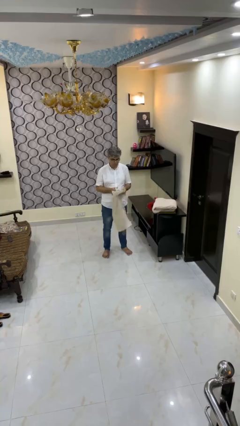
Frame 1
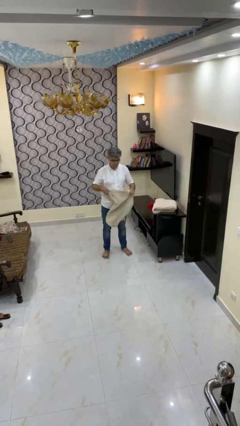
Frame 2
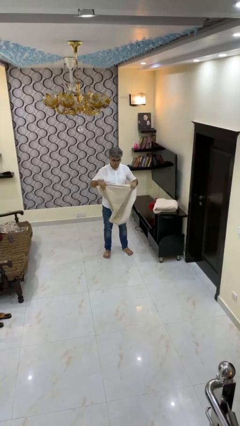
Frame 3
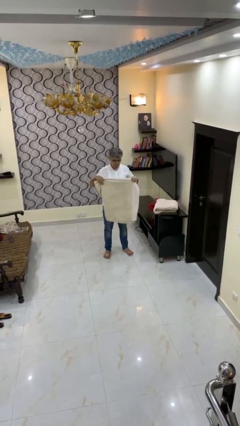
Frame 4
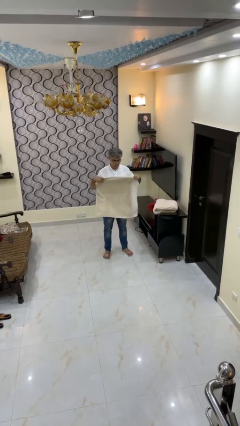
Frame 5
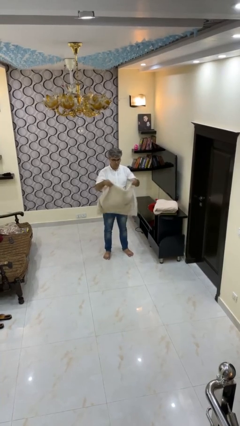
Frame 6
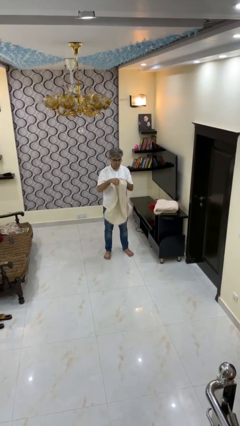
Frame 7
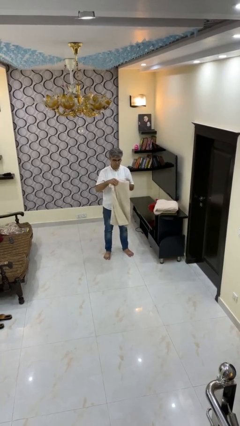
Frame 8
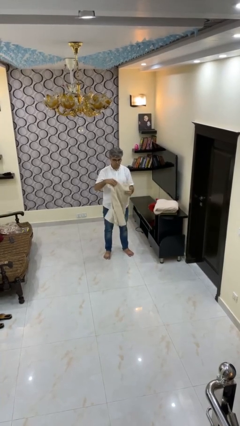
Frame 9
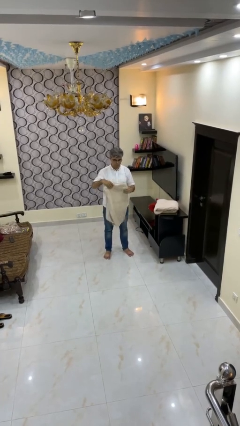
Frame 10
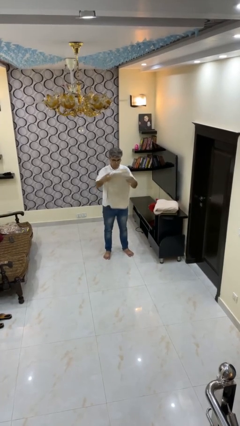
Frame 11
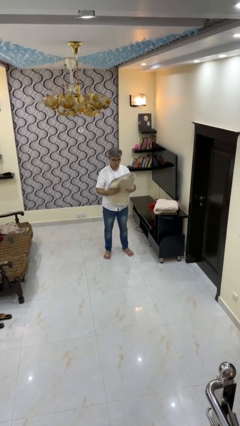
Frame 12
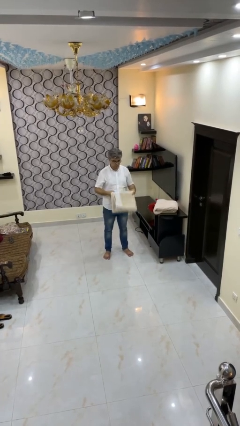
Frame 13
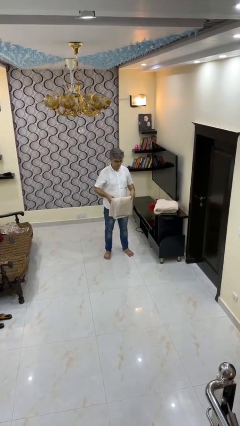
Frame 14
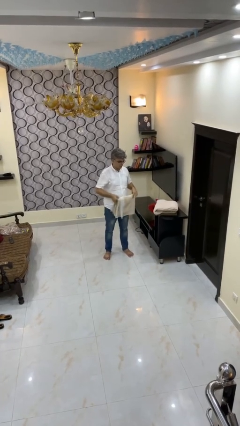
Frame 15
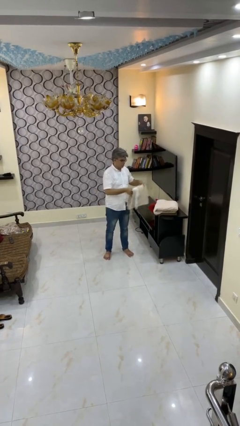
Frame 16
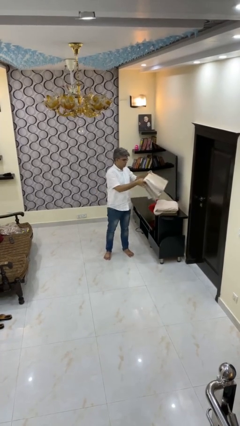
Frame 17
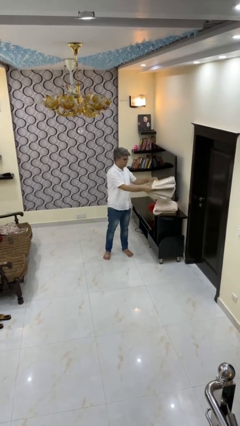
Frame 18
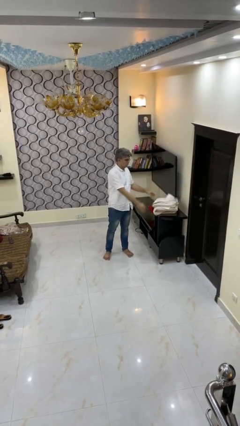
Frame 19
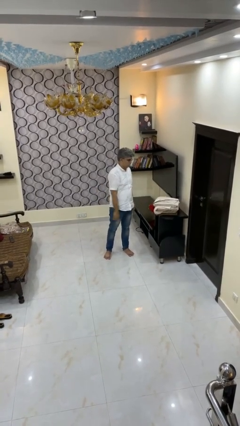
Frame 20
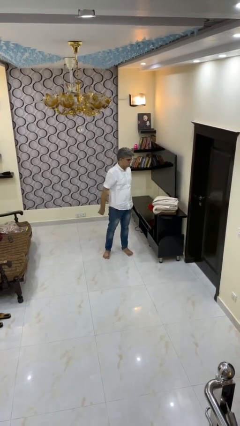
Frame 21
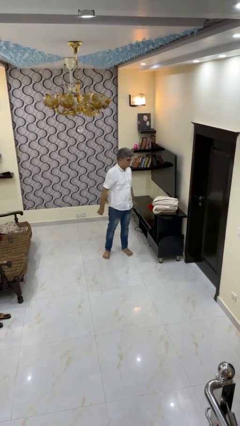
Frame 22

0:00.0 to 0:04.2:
person folds towel

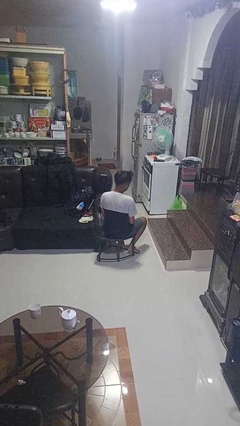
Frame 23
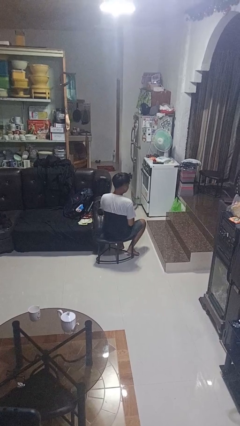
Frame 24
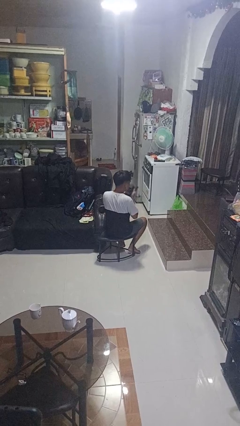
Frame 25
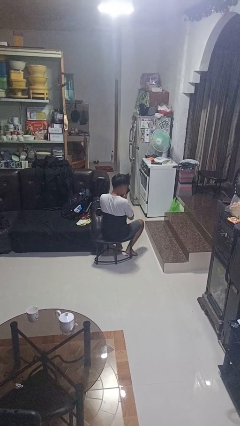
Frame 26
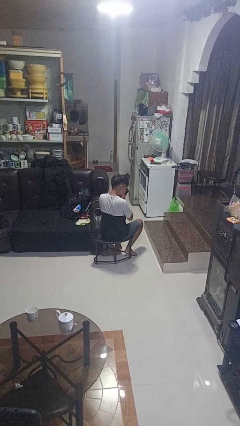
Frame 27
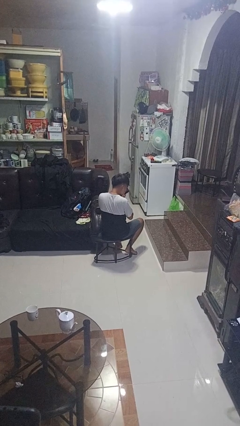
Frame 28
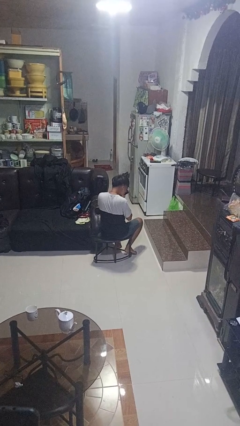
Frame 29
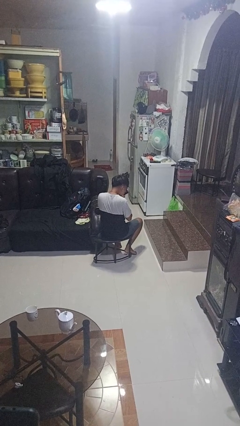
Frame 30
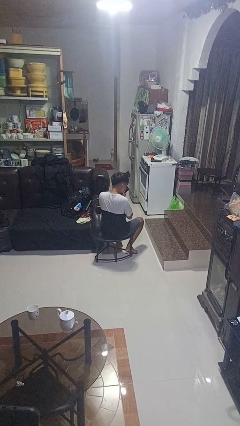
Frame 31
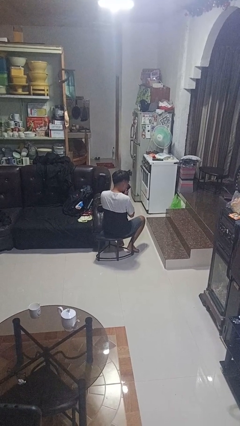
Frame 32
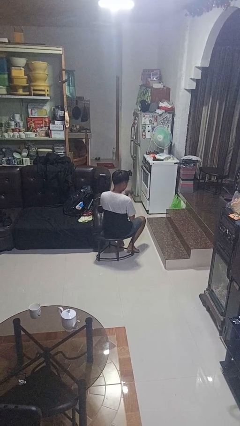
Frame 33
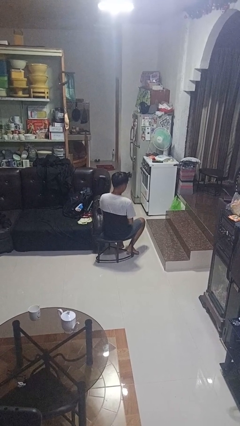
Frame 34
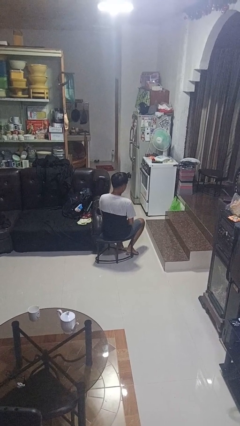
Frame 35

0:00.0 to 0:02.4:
person blows nose

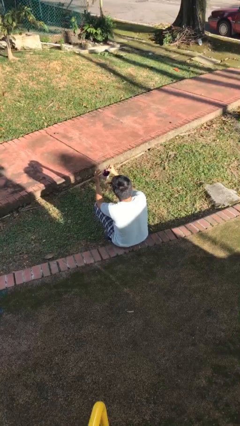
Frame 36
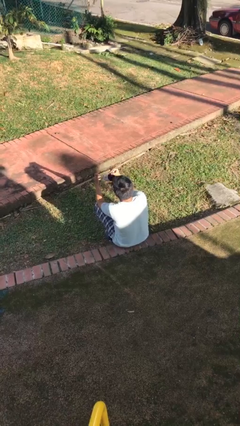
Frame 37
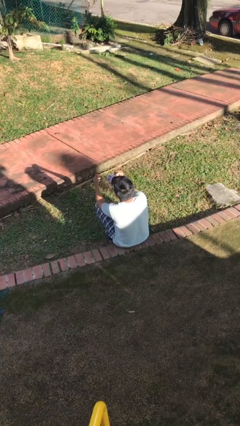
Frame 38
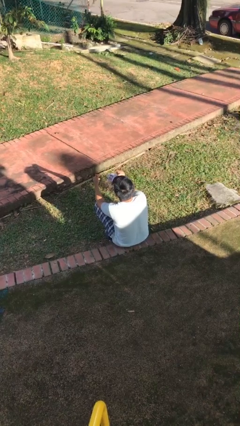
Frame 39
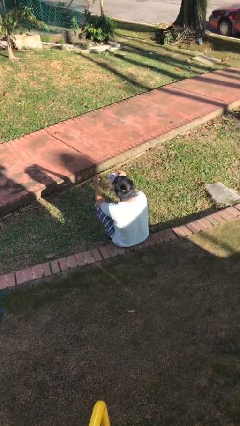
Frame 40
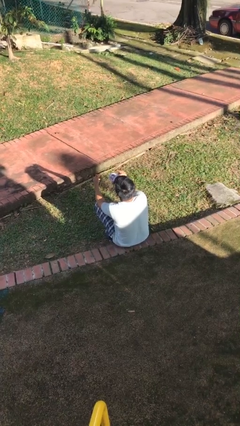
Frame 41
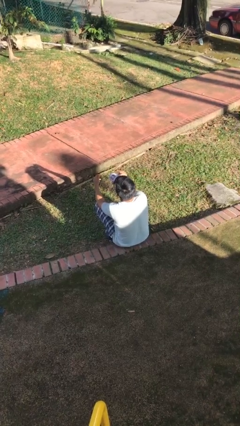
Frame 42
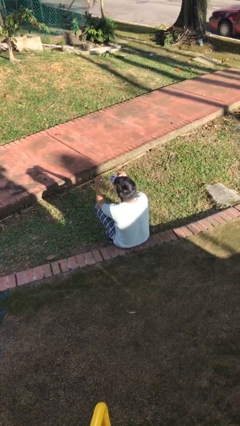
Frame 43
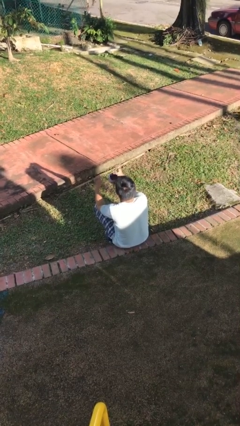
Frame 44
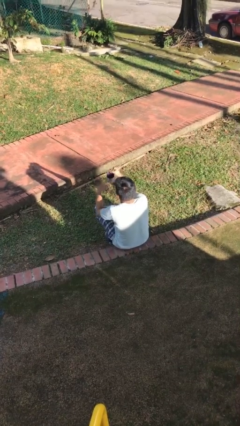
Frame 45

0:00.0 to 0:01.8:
person drinks from mug

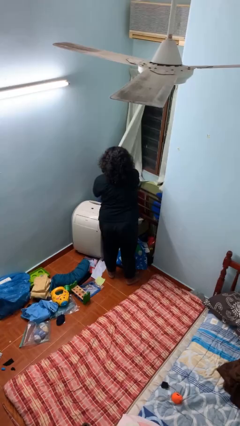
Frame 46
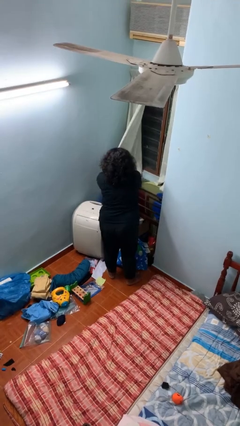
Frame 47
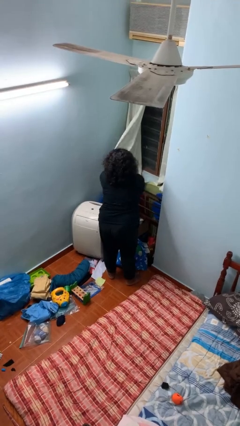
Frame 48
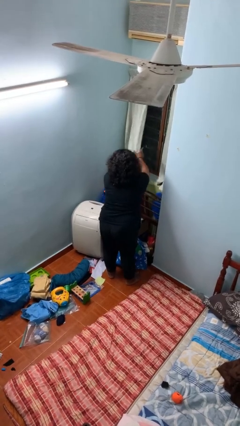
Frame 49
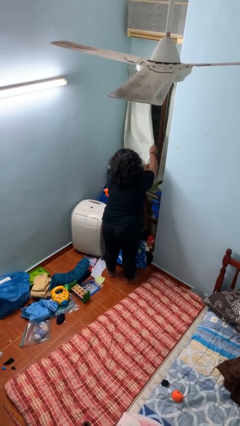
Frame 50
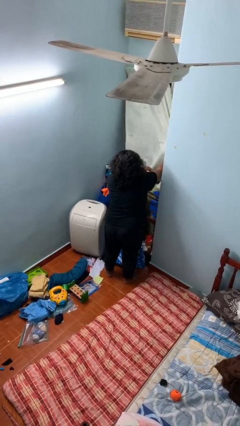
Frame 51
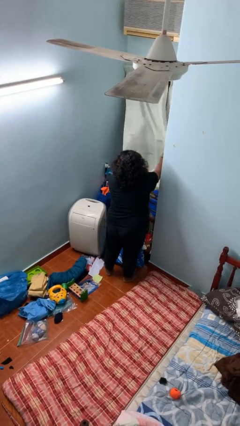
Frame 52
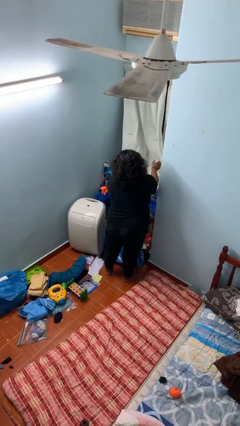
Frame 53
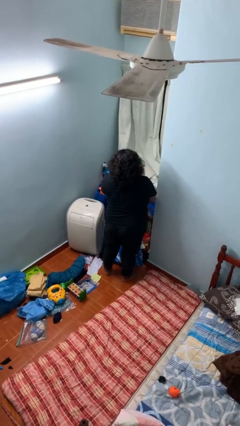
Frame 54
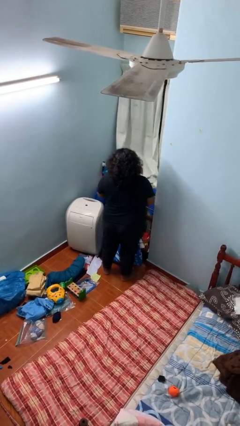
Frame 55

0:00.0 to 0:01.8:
person closes curtains

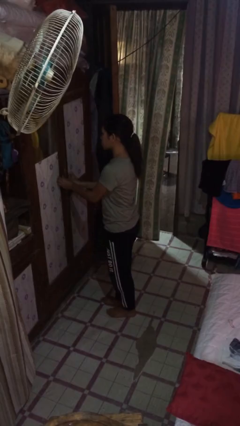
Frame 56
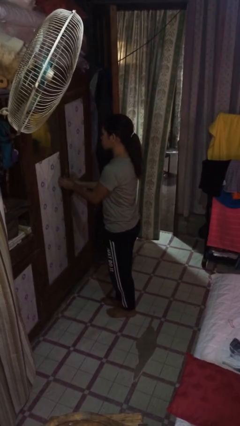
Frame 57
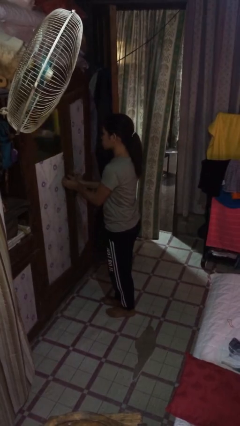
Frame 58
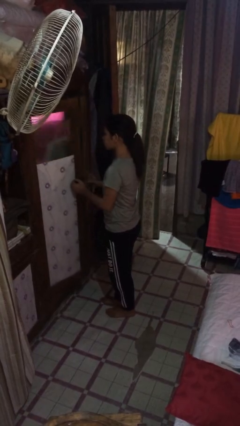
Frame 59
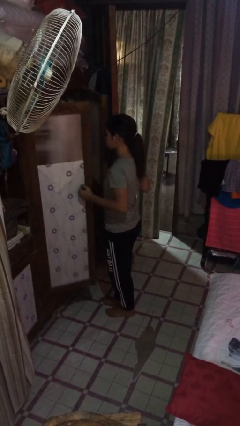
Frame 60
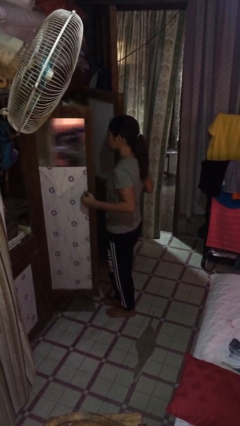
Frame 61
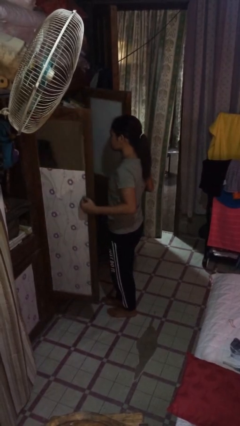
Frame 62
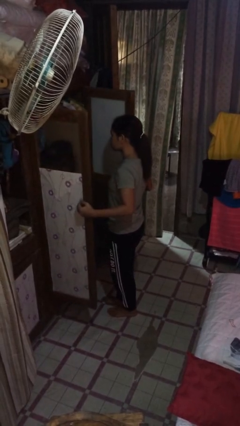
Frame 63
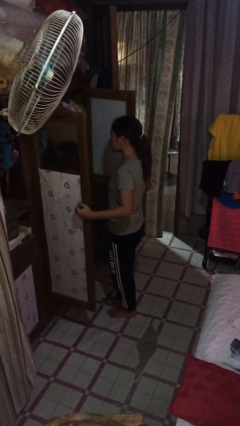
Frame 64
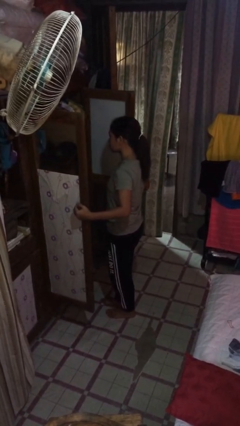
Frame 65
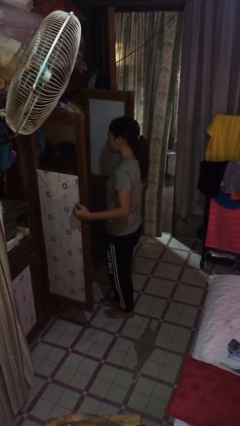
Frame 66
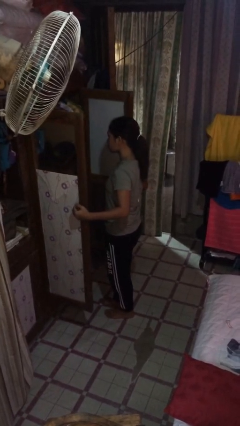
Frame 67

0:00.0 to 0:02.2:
person opens closet door

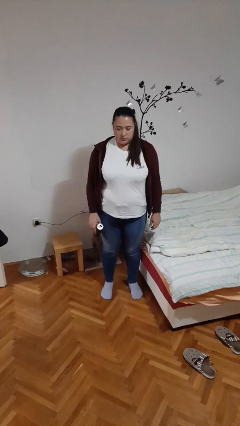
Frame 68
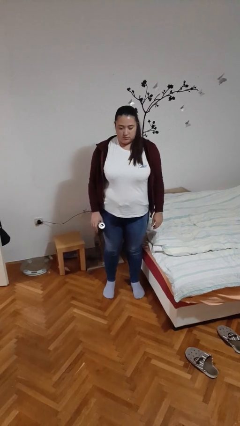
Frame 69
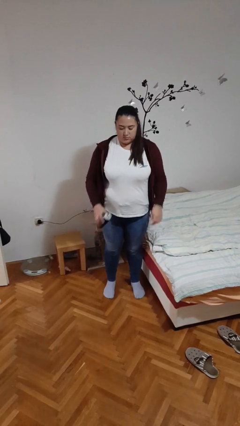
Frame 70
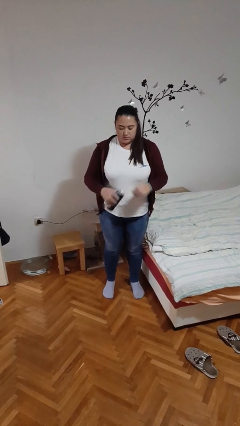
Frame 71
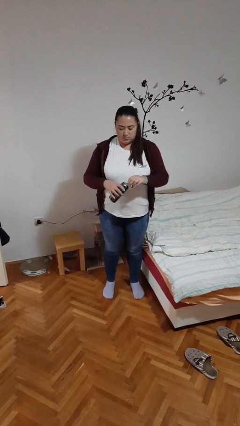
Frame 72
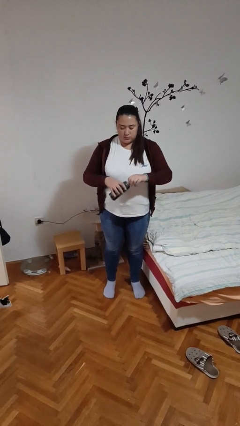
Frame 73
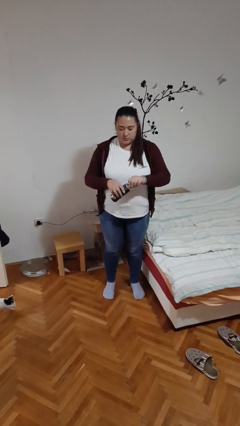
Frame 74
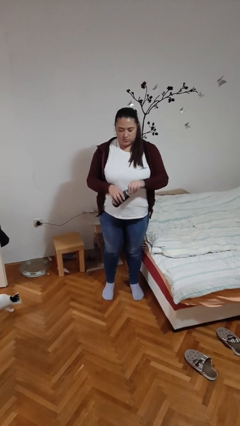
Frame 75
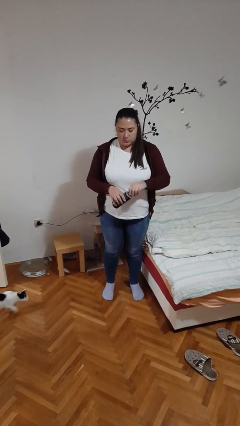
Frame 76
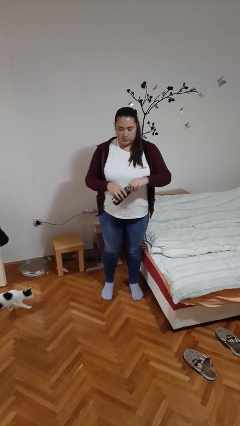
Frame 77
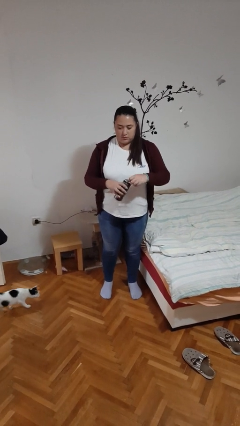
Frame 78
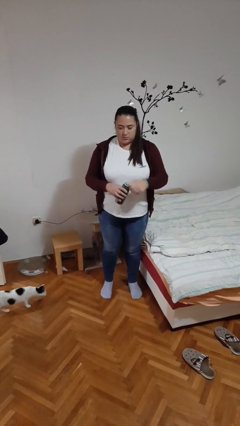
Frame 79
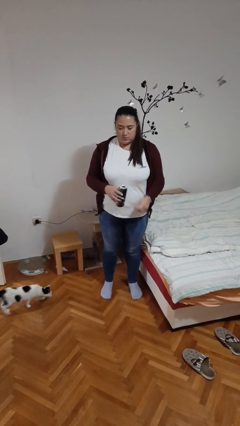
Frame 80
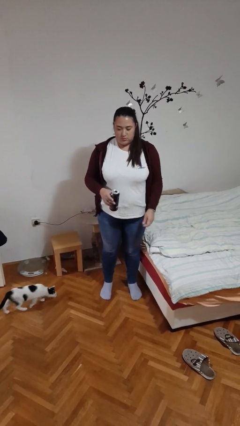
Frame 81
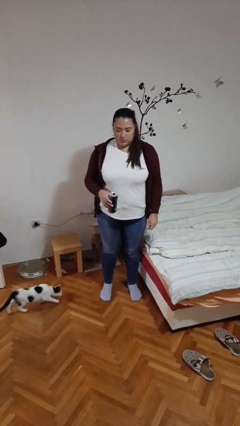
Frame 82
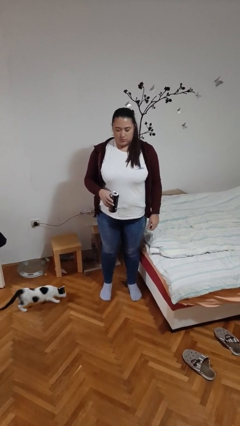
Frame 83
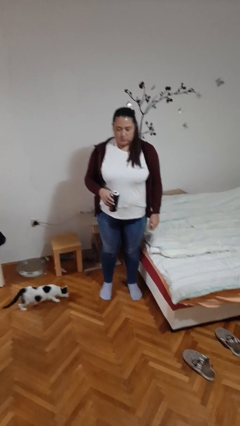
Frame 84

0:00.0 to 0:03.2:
person opens beverage can

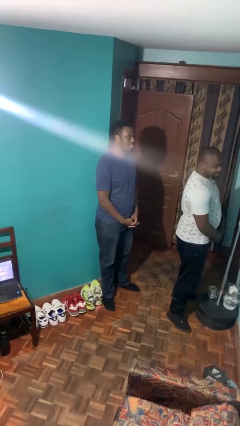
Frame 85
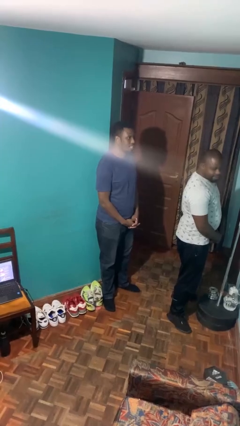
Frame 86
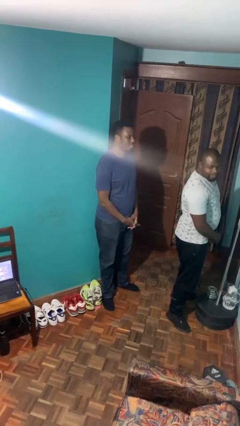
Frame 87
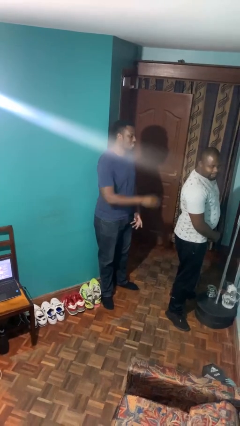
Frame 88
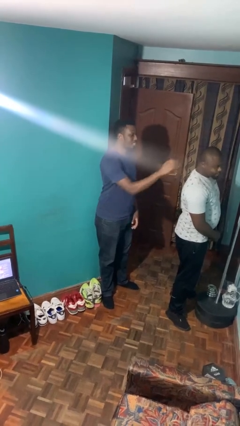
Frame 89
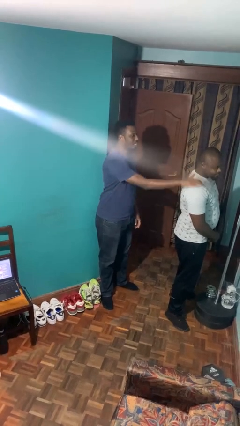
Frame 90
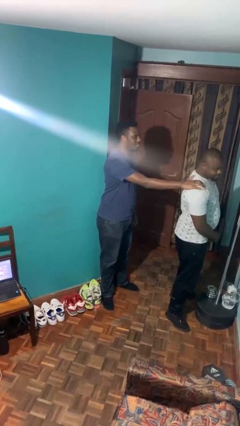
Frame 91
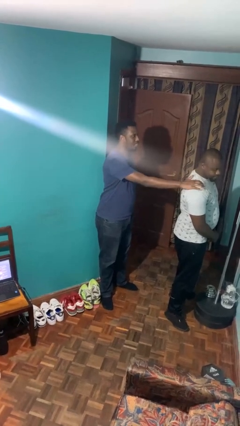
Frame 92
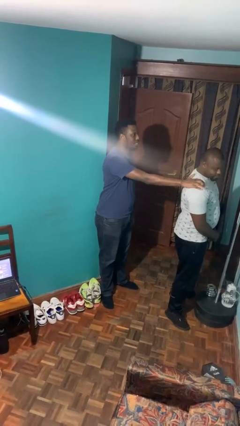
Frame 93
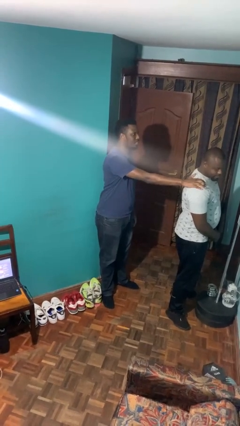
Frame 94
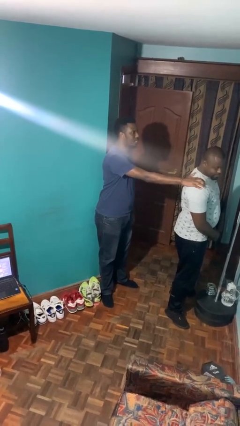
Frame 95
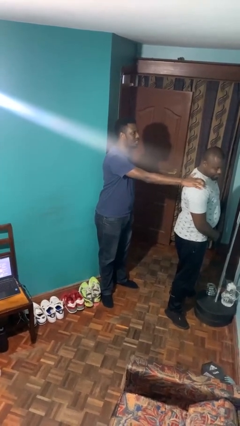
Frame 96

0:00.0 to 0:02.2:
person grabs person by shoulder
